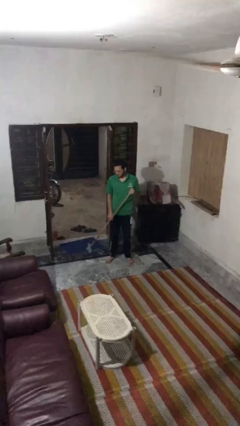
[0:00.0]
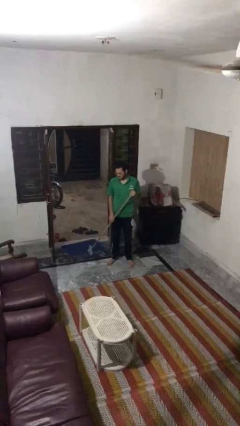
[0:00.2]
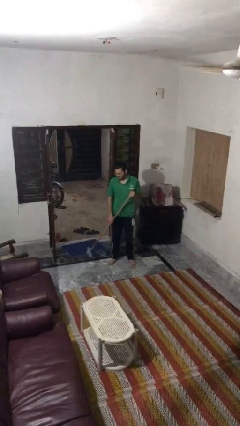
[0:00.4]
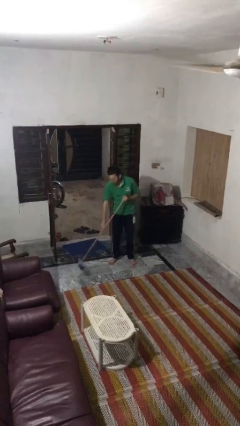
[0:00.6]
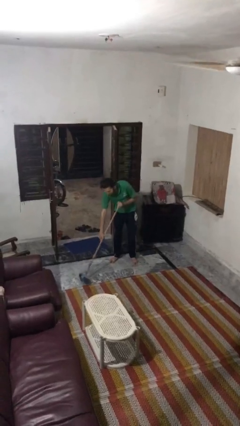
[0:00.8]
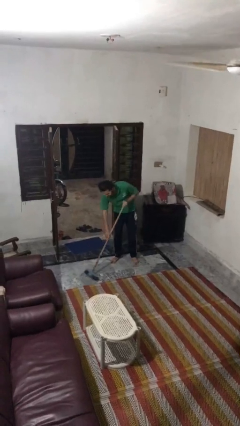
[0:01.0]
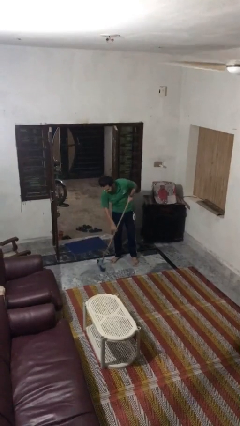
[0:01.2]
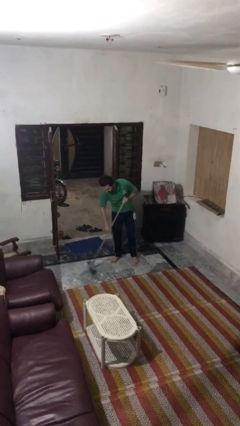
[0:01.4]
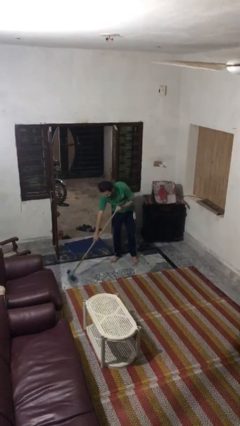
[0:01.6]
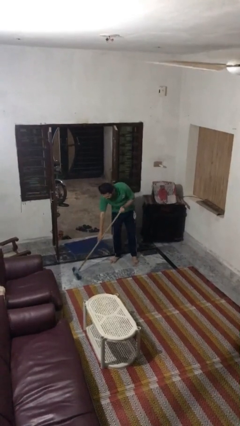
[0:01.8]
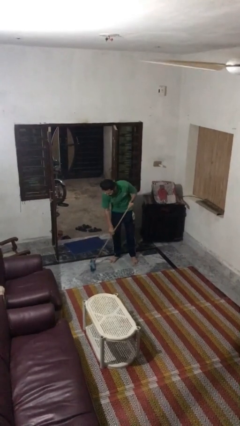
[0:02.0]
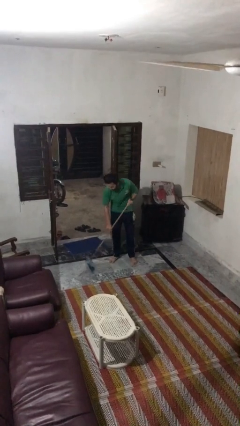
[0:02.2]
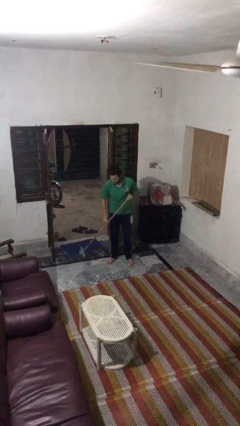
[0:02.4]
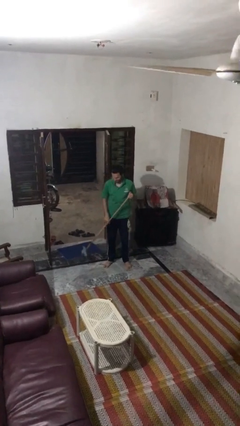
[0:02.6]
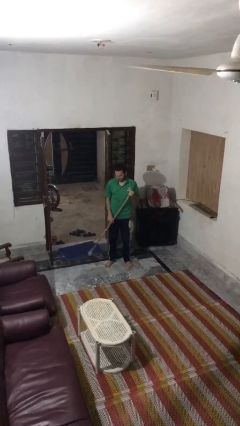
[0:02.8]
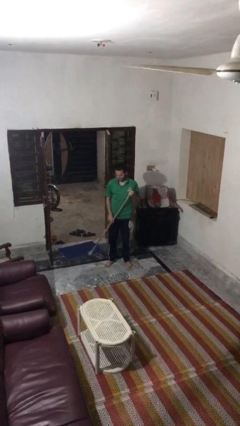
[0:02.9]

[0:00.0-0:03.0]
person sweeps floor

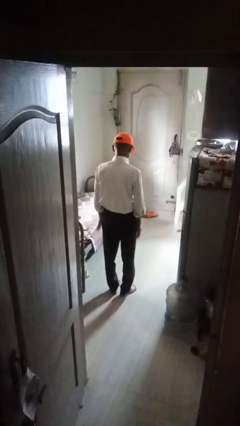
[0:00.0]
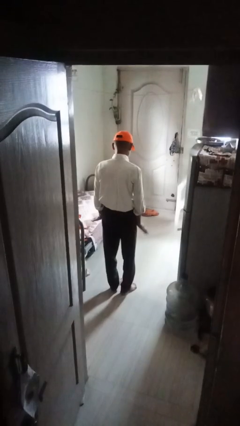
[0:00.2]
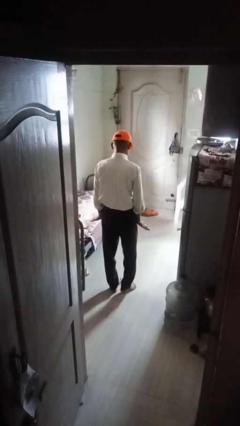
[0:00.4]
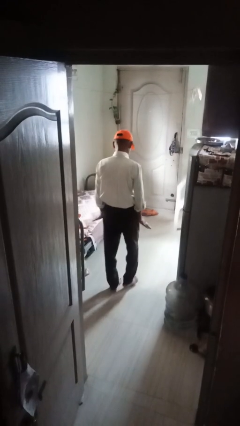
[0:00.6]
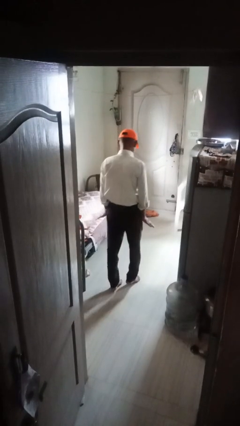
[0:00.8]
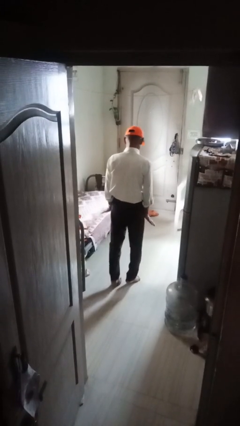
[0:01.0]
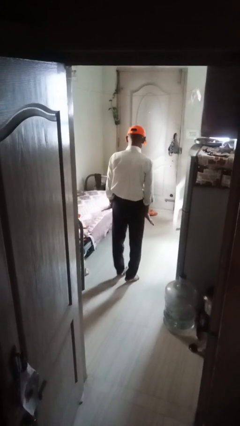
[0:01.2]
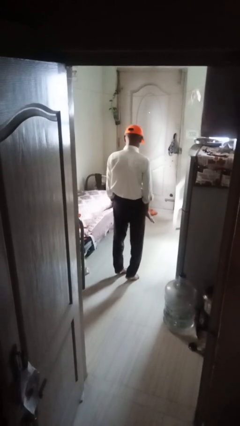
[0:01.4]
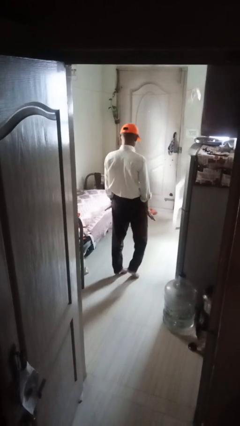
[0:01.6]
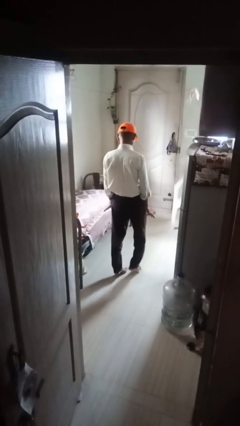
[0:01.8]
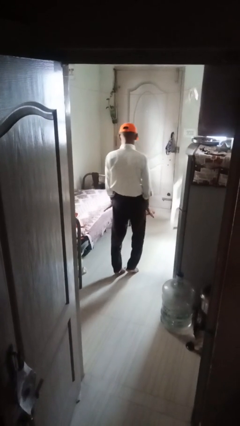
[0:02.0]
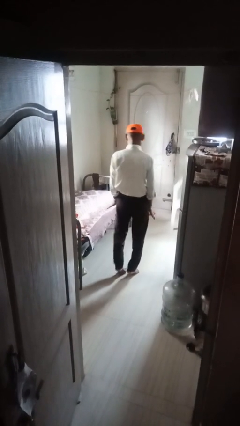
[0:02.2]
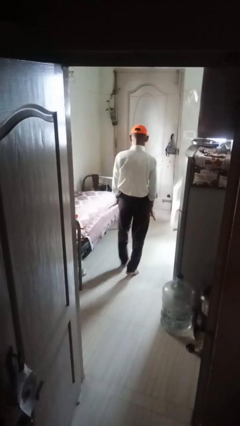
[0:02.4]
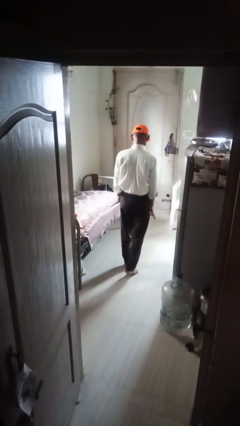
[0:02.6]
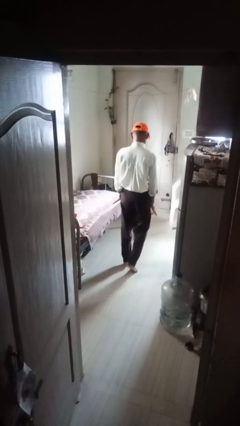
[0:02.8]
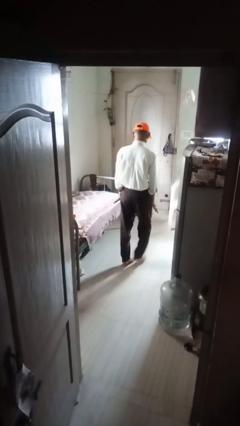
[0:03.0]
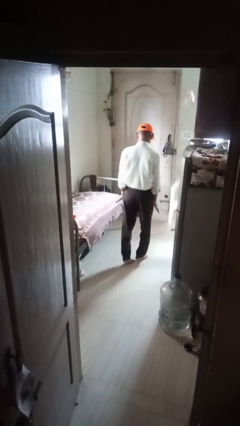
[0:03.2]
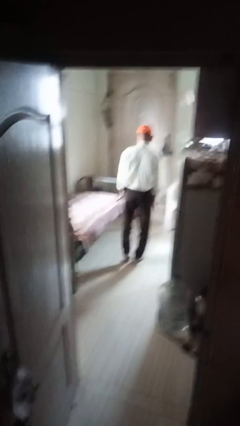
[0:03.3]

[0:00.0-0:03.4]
person walks tiptoe

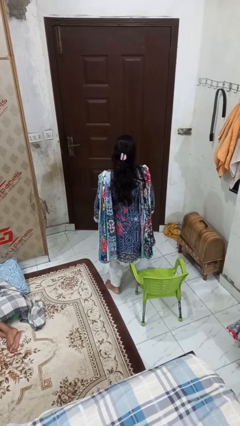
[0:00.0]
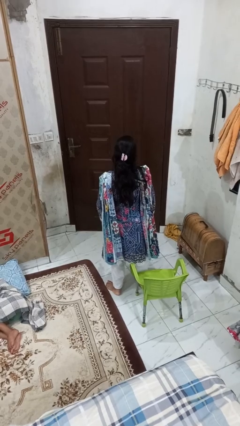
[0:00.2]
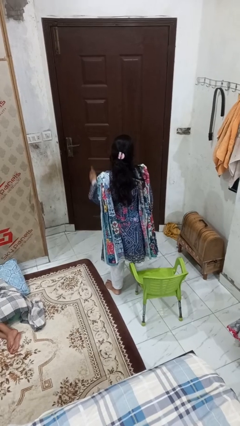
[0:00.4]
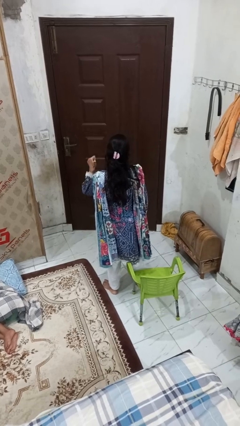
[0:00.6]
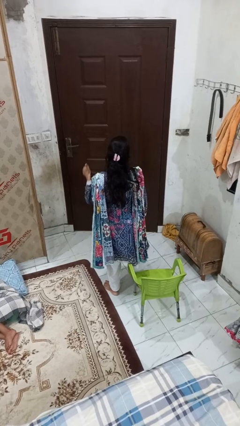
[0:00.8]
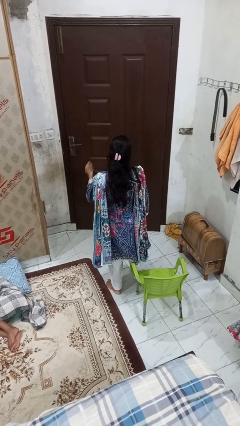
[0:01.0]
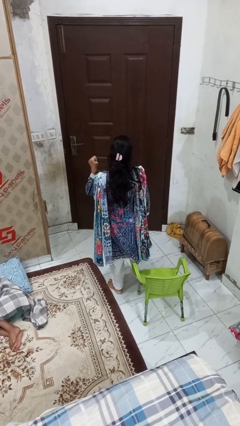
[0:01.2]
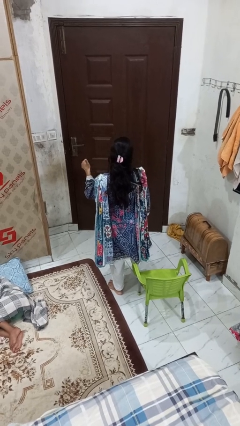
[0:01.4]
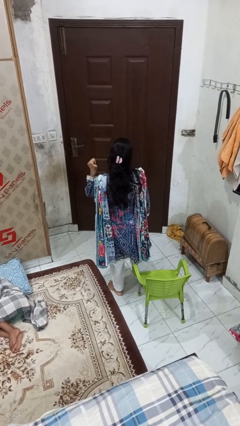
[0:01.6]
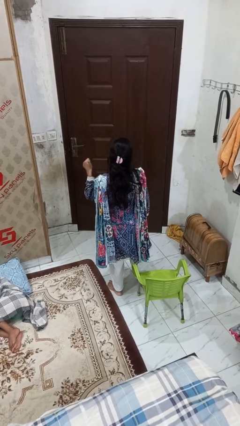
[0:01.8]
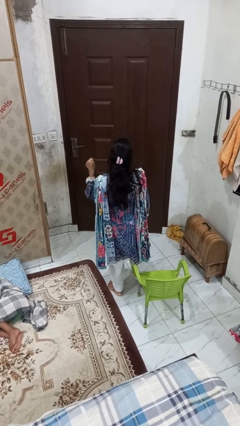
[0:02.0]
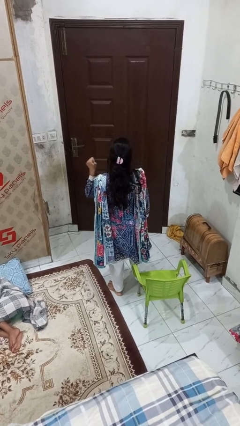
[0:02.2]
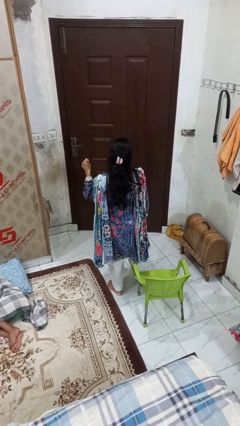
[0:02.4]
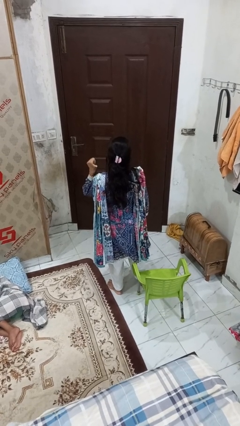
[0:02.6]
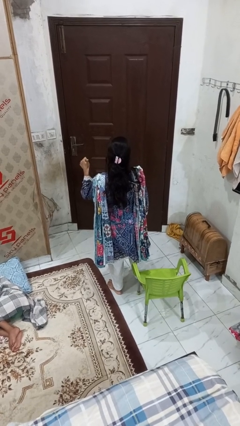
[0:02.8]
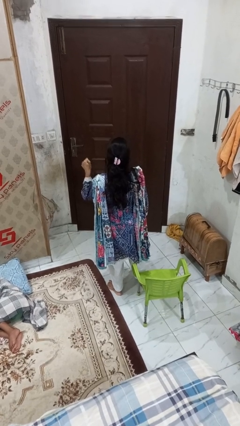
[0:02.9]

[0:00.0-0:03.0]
person gestures behind me

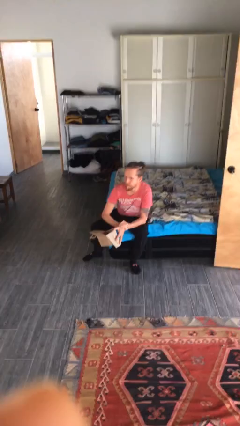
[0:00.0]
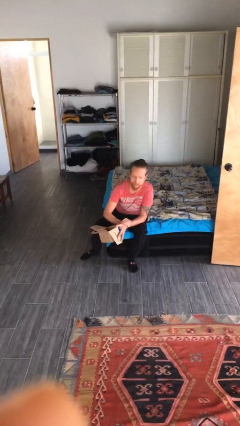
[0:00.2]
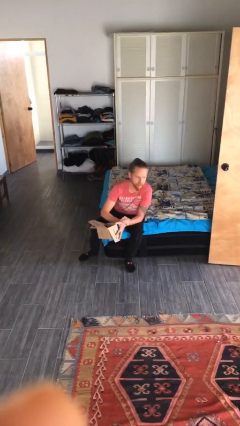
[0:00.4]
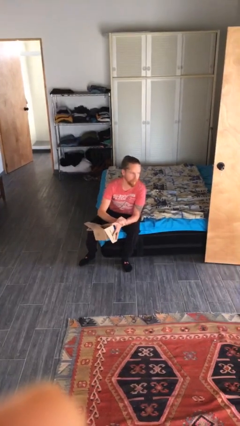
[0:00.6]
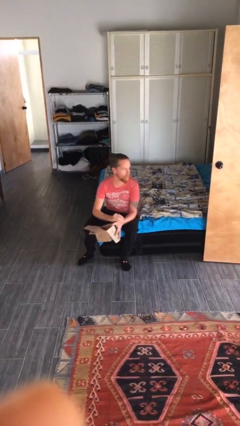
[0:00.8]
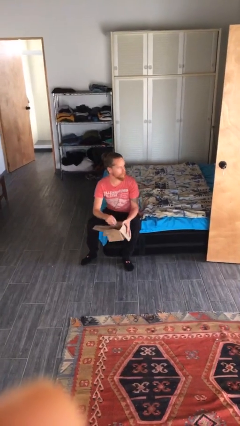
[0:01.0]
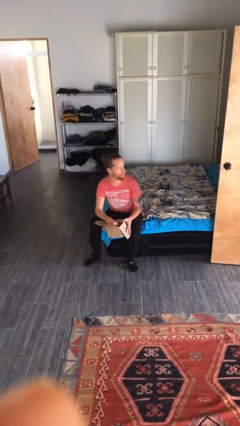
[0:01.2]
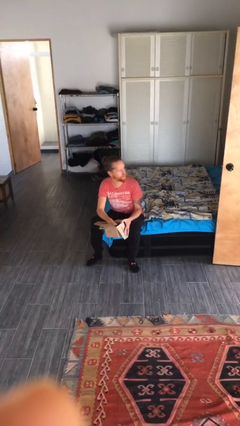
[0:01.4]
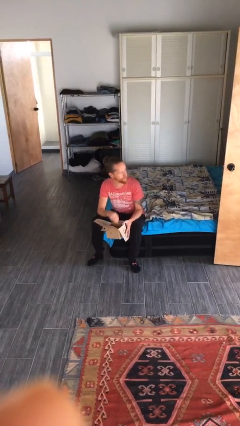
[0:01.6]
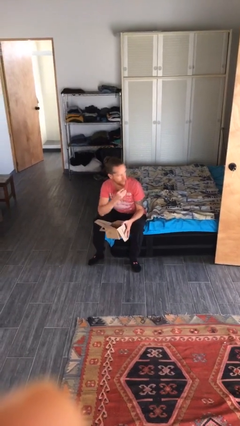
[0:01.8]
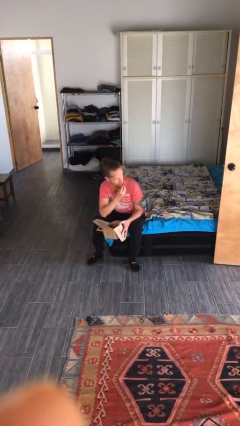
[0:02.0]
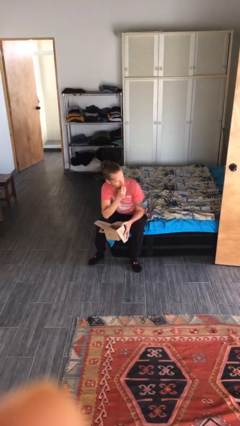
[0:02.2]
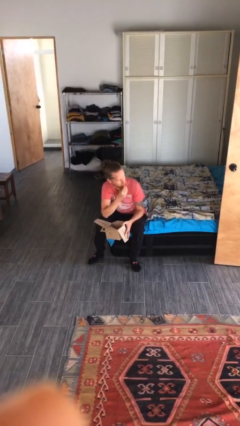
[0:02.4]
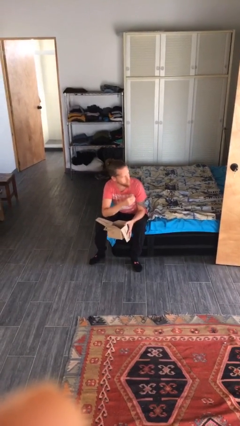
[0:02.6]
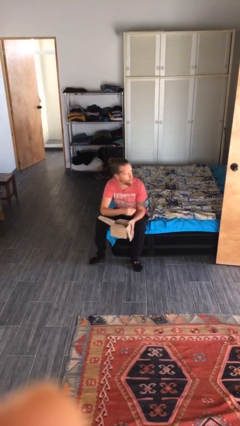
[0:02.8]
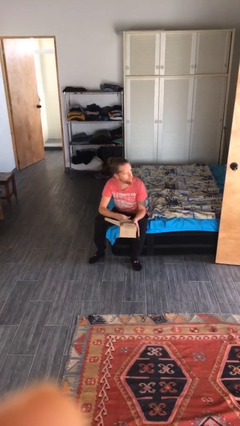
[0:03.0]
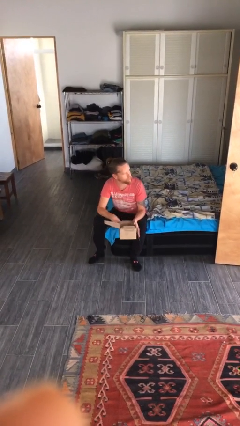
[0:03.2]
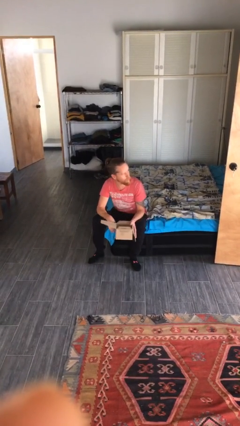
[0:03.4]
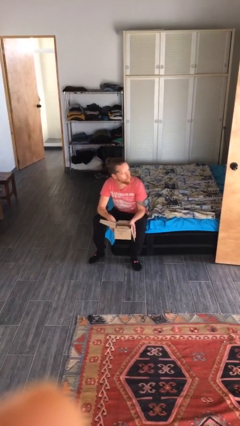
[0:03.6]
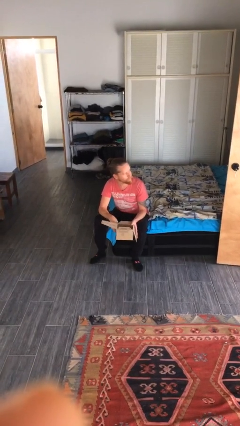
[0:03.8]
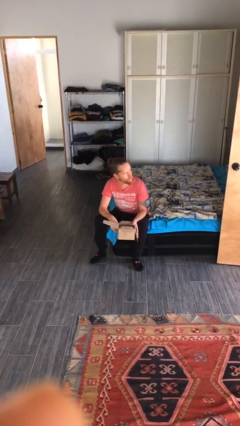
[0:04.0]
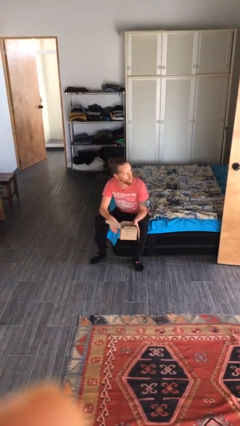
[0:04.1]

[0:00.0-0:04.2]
person eats snack from bag

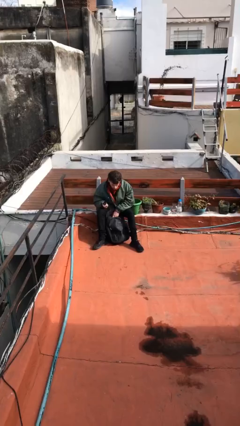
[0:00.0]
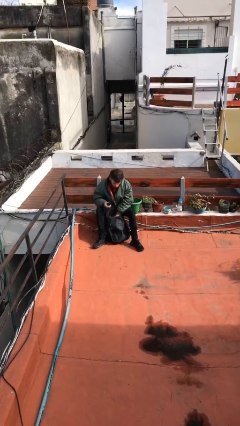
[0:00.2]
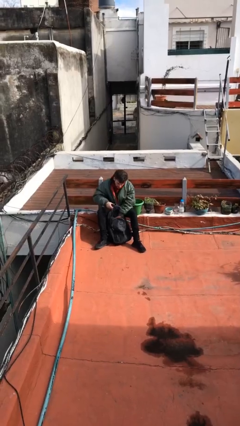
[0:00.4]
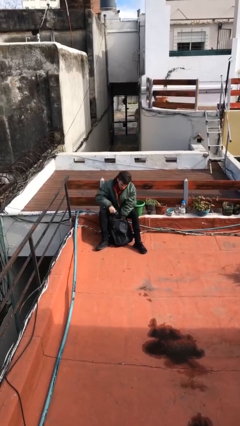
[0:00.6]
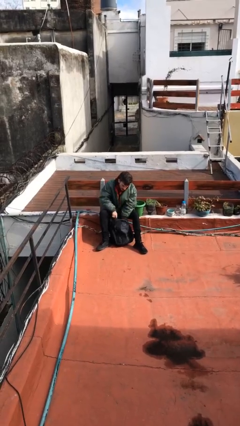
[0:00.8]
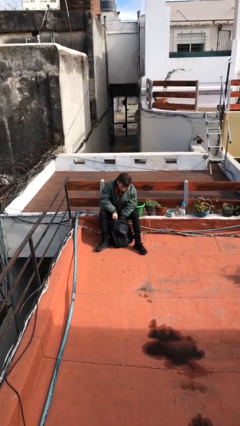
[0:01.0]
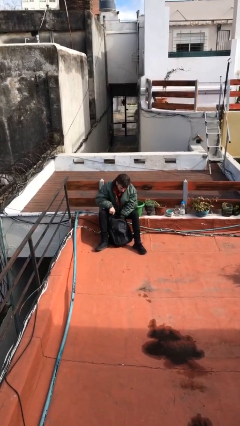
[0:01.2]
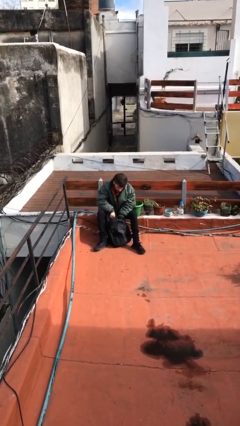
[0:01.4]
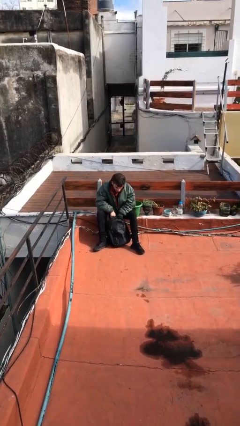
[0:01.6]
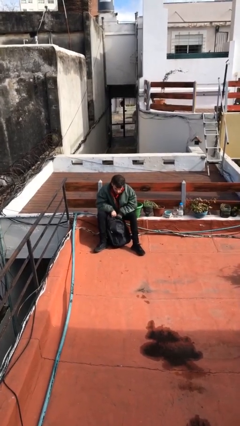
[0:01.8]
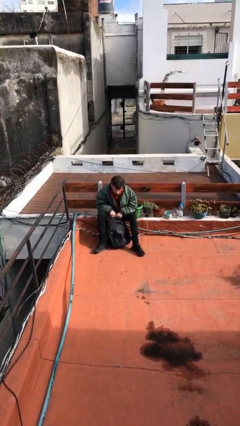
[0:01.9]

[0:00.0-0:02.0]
person puts object into backpack

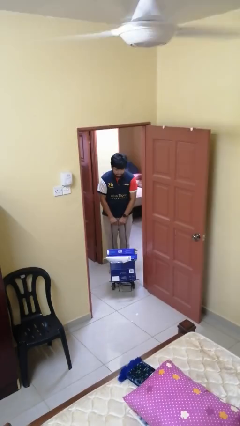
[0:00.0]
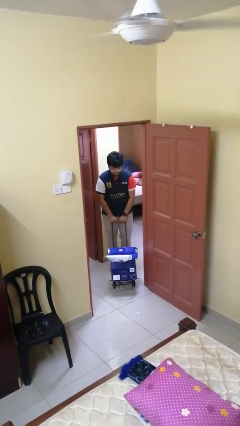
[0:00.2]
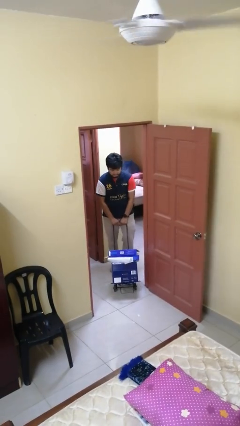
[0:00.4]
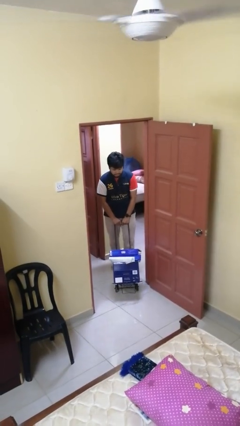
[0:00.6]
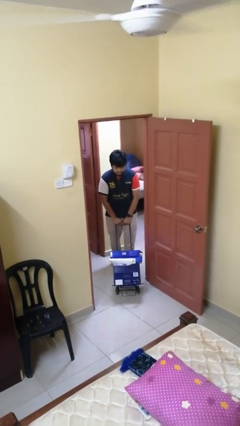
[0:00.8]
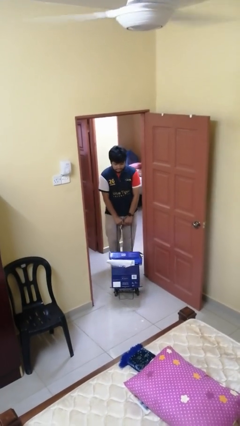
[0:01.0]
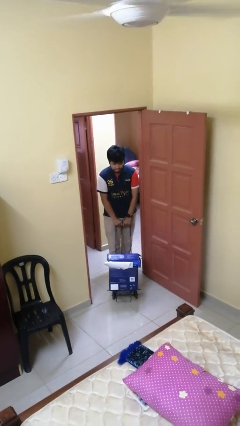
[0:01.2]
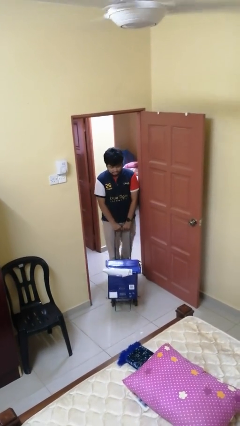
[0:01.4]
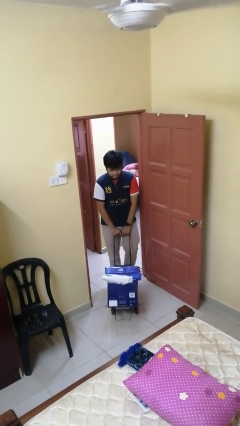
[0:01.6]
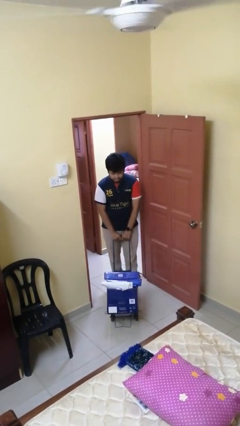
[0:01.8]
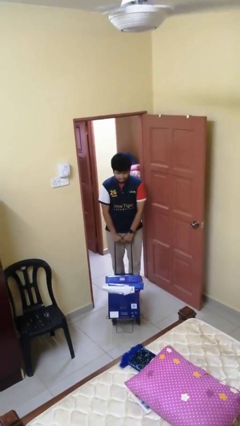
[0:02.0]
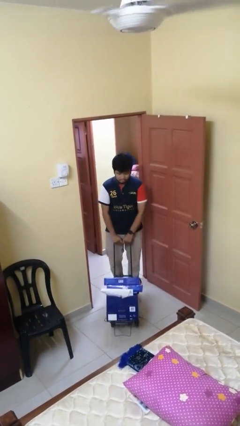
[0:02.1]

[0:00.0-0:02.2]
person pushes wheeled cart
